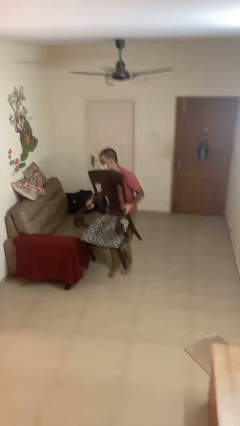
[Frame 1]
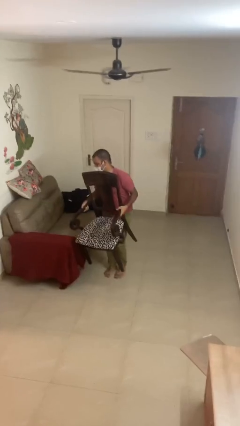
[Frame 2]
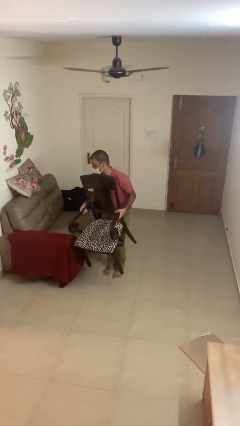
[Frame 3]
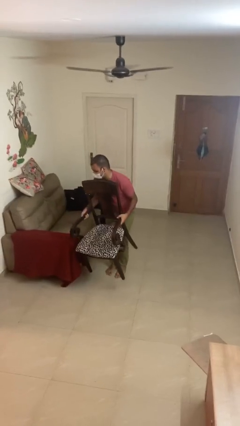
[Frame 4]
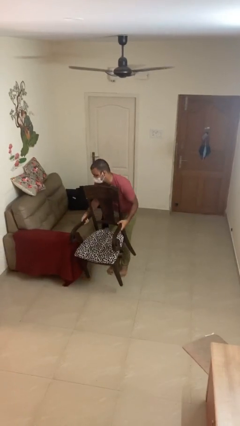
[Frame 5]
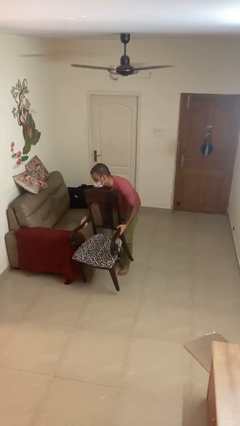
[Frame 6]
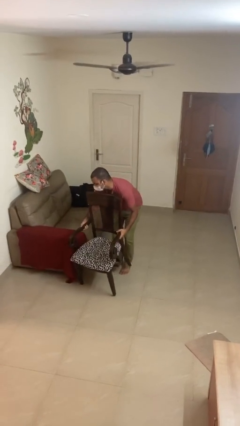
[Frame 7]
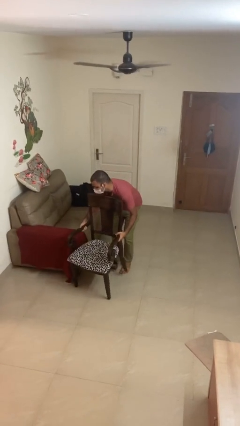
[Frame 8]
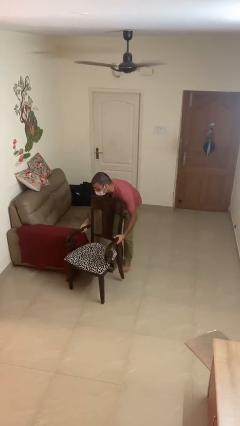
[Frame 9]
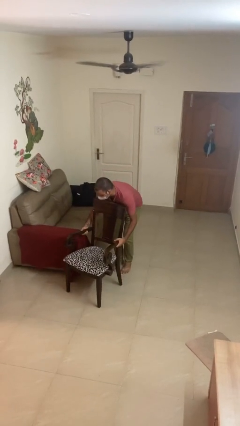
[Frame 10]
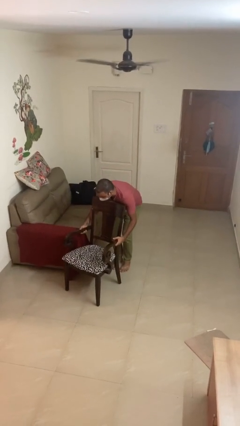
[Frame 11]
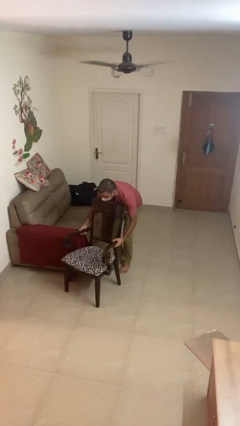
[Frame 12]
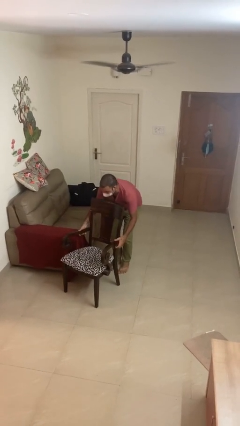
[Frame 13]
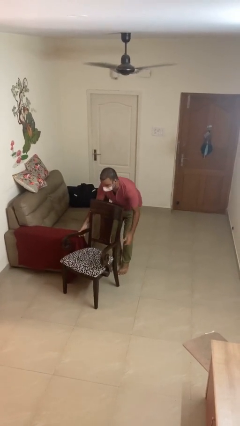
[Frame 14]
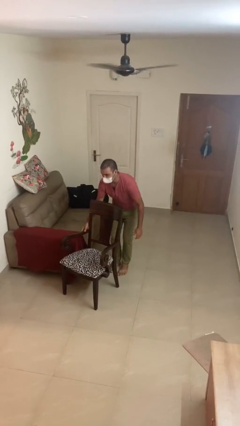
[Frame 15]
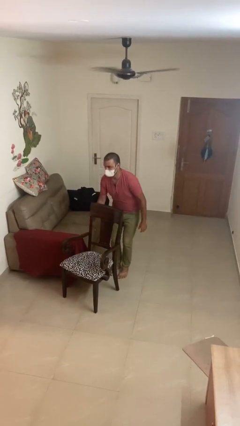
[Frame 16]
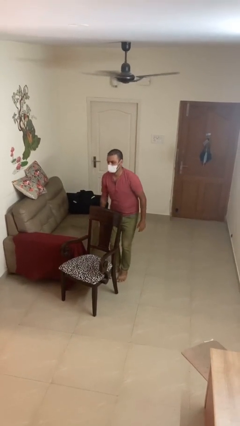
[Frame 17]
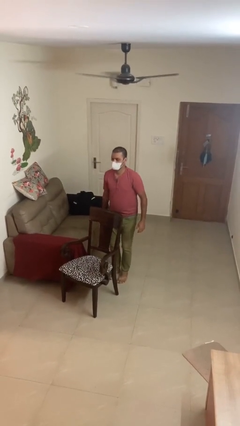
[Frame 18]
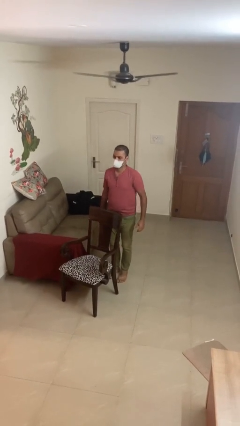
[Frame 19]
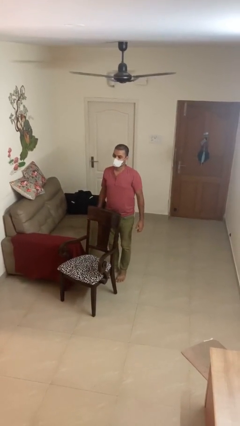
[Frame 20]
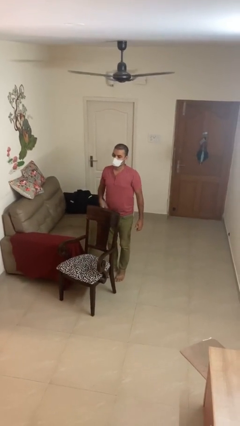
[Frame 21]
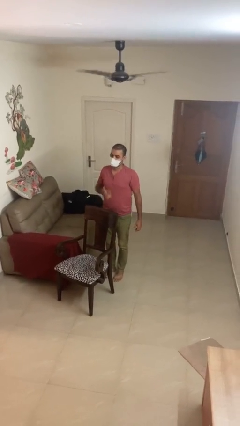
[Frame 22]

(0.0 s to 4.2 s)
person puts down object on floor

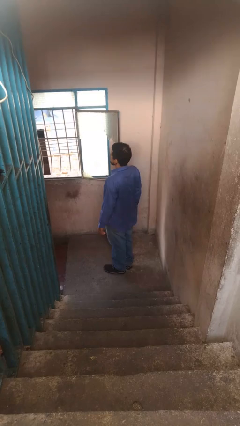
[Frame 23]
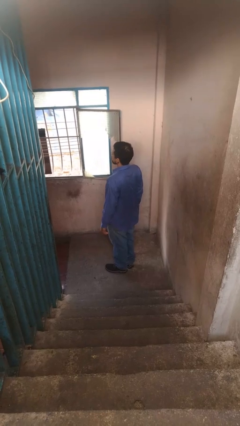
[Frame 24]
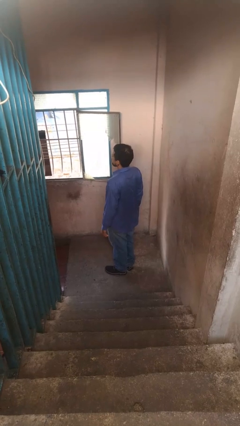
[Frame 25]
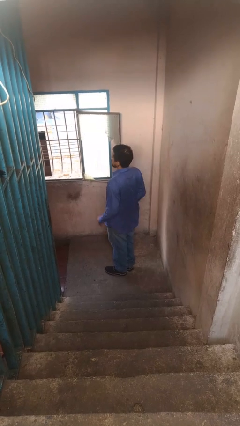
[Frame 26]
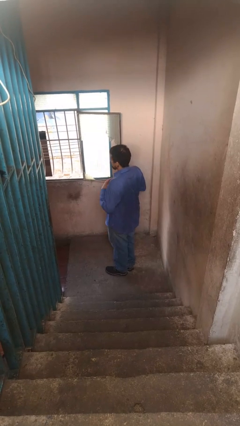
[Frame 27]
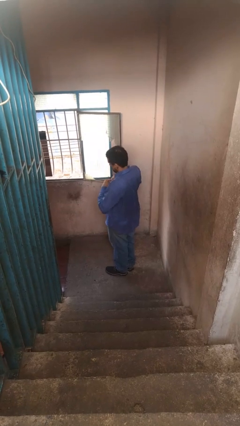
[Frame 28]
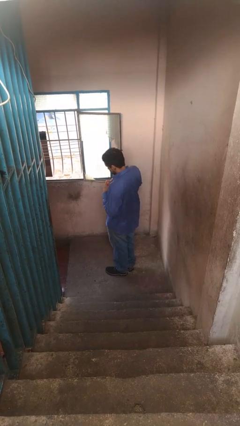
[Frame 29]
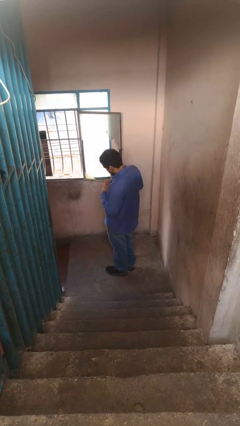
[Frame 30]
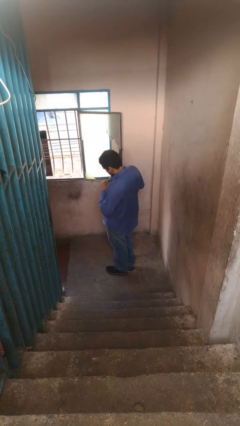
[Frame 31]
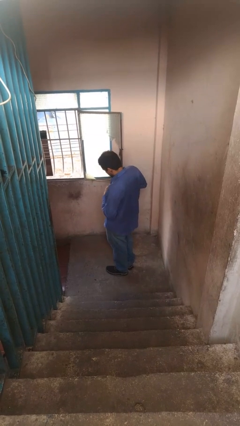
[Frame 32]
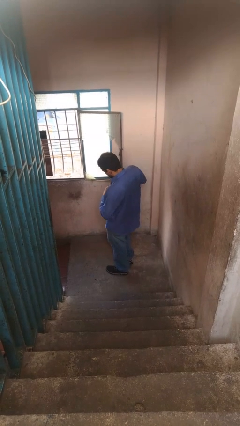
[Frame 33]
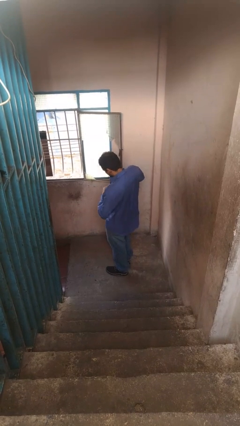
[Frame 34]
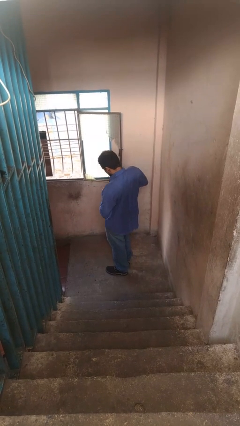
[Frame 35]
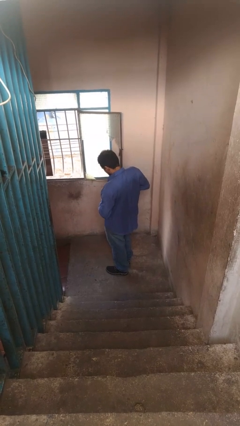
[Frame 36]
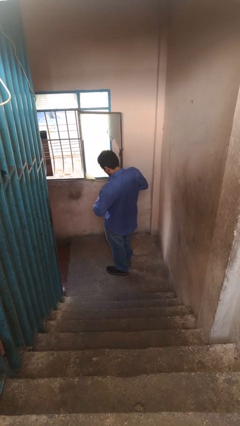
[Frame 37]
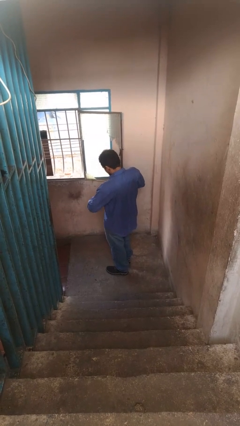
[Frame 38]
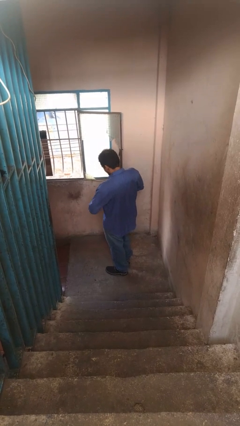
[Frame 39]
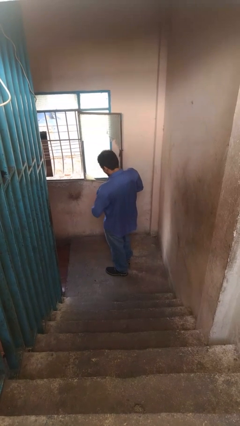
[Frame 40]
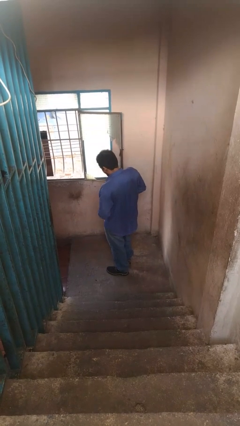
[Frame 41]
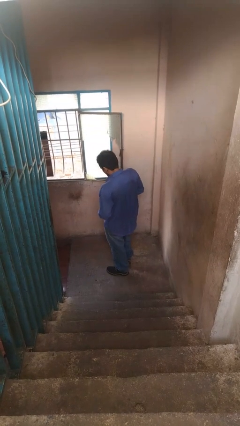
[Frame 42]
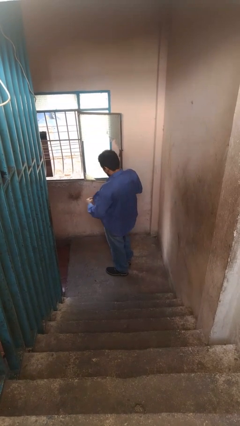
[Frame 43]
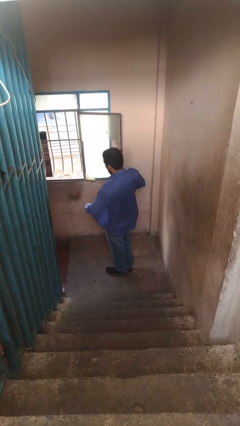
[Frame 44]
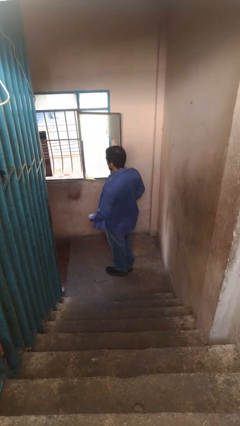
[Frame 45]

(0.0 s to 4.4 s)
person unbuttons shirt

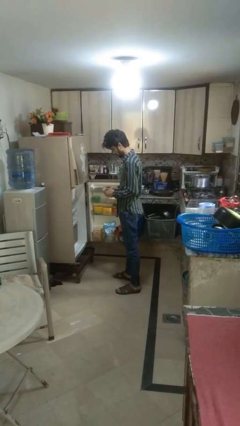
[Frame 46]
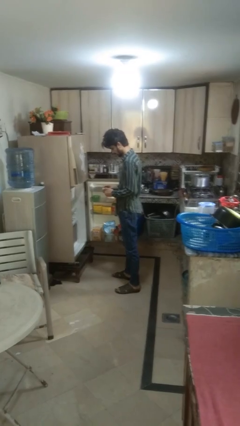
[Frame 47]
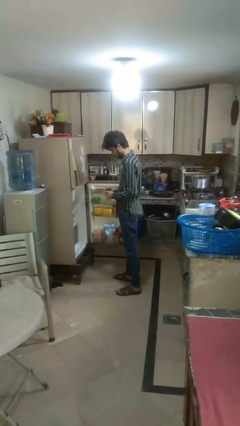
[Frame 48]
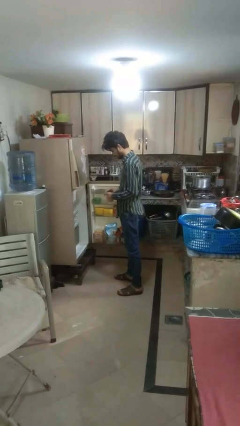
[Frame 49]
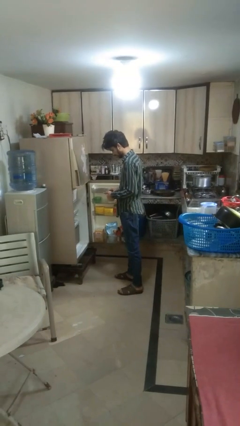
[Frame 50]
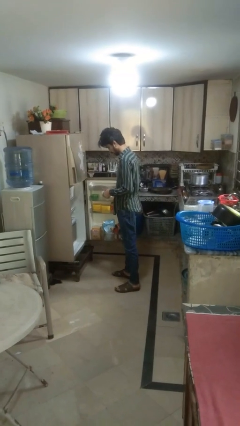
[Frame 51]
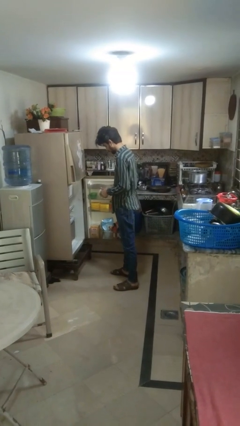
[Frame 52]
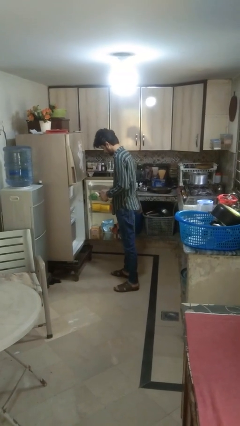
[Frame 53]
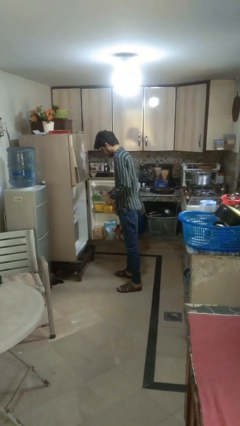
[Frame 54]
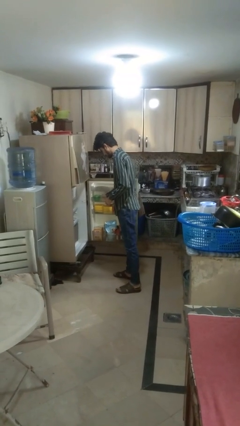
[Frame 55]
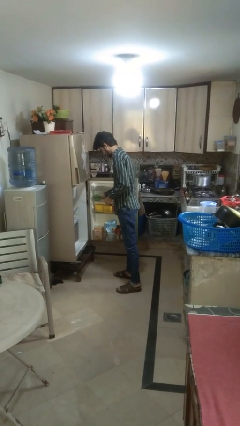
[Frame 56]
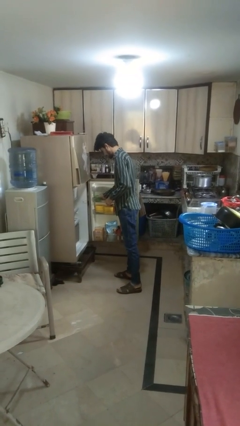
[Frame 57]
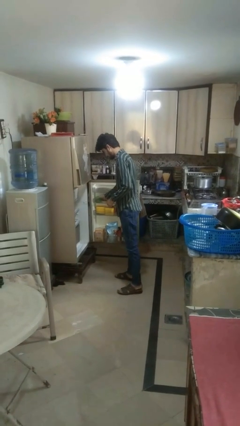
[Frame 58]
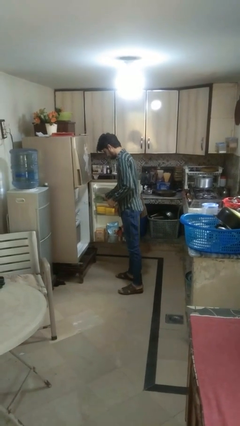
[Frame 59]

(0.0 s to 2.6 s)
person puts object into refrigerator

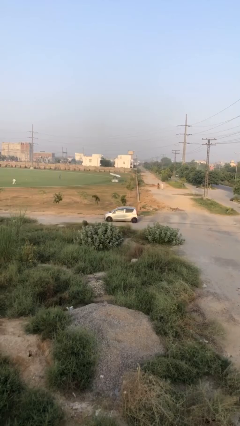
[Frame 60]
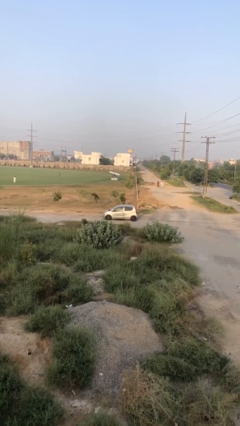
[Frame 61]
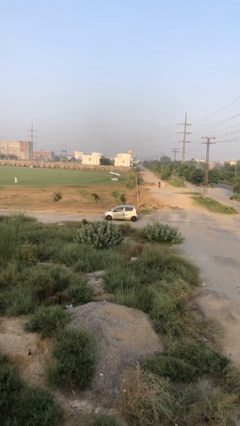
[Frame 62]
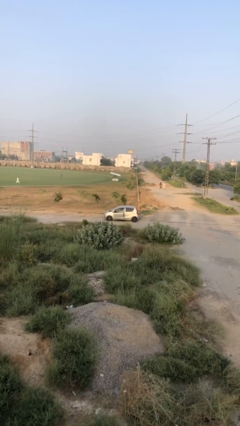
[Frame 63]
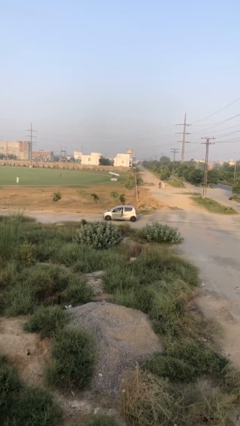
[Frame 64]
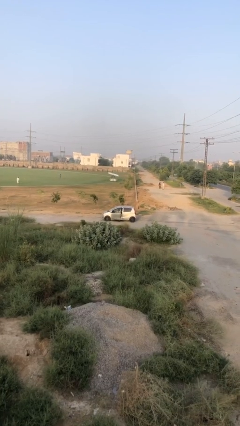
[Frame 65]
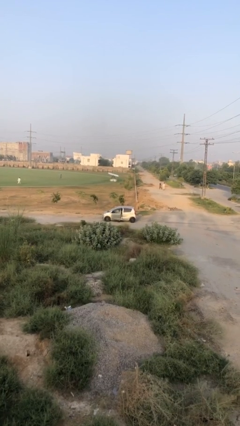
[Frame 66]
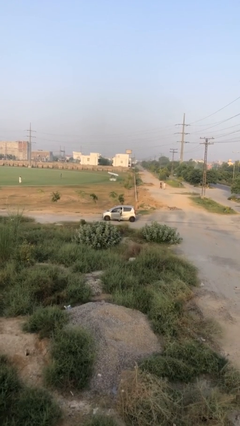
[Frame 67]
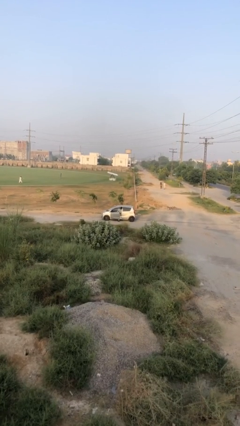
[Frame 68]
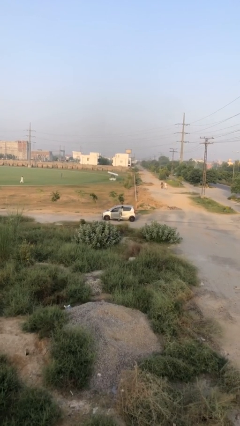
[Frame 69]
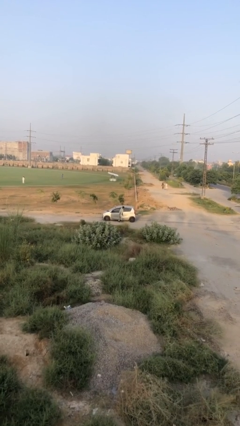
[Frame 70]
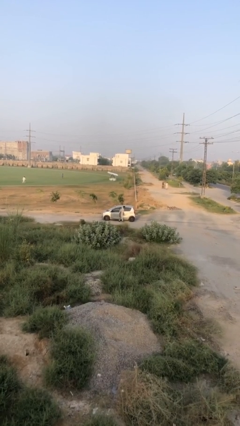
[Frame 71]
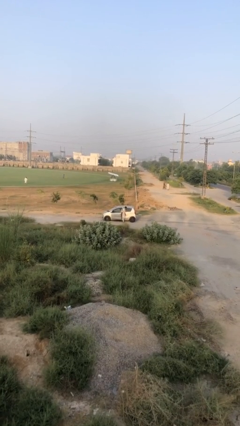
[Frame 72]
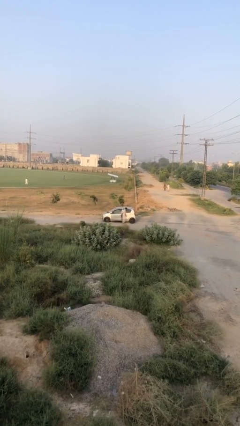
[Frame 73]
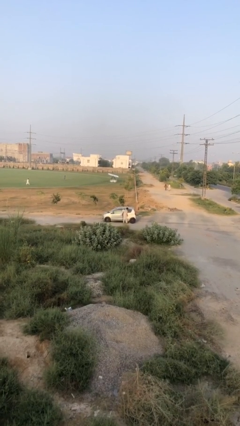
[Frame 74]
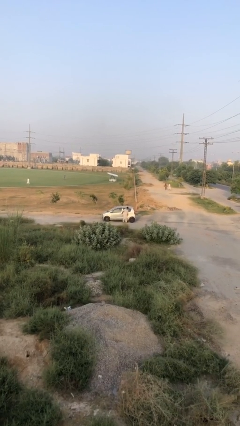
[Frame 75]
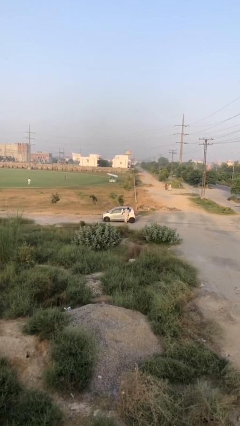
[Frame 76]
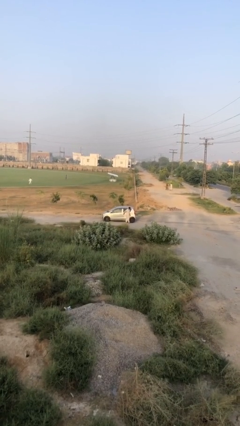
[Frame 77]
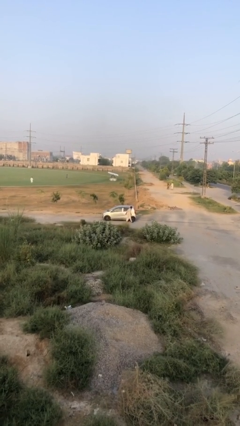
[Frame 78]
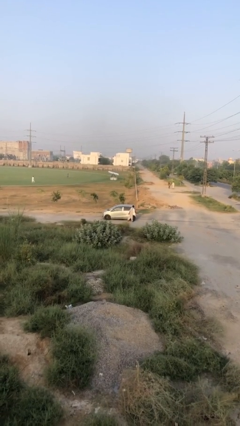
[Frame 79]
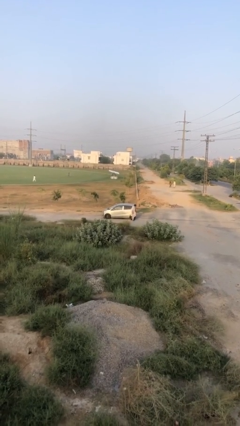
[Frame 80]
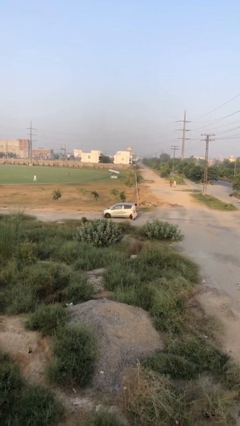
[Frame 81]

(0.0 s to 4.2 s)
car drops off person

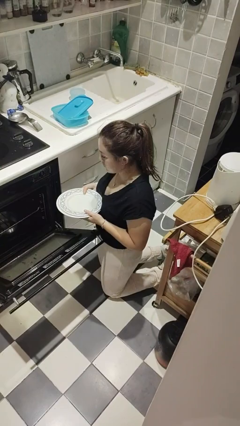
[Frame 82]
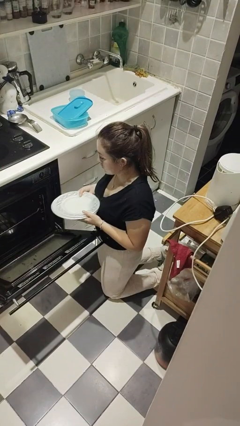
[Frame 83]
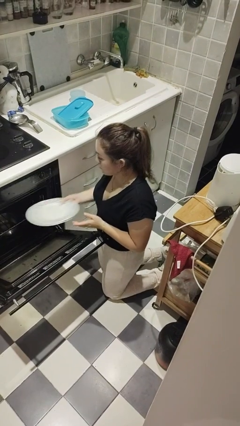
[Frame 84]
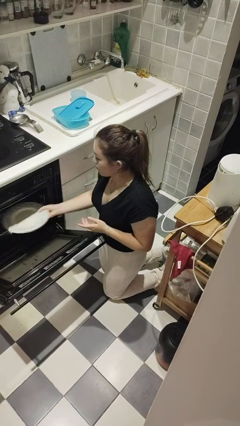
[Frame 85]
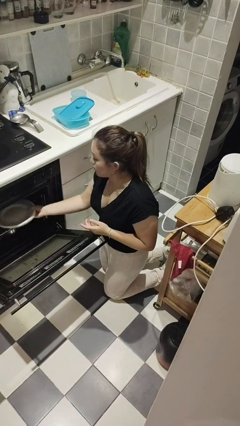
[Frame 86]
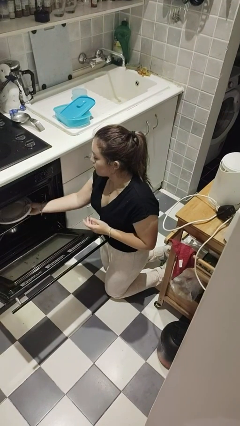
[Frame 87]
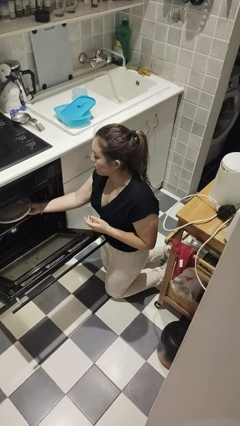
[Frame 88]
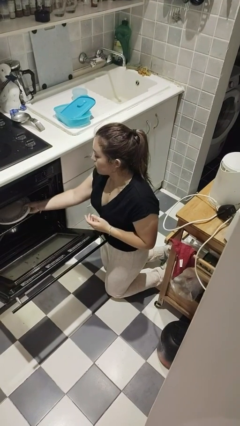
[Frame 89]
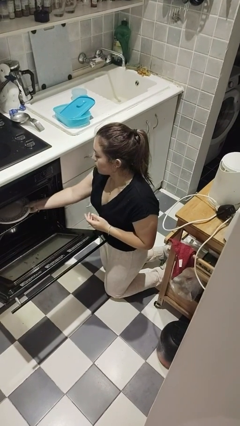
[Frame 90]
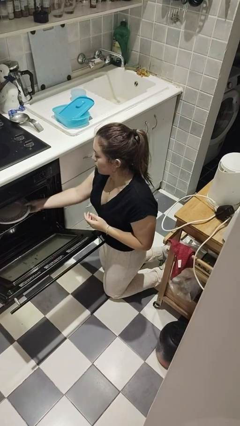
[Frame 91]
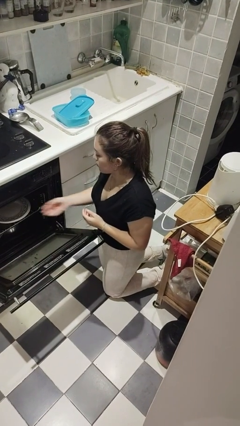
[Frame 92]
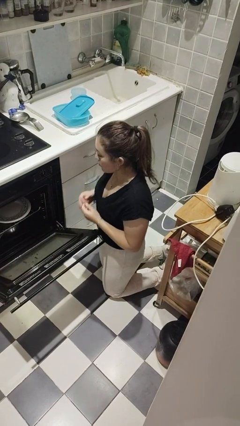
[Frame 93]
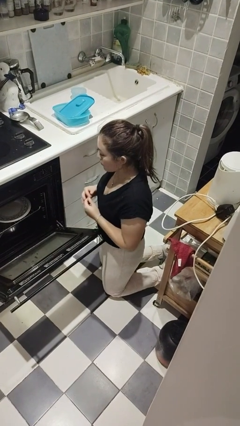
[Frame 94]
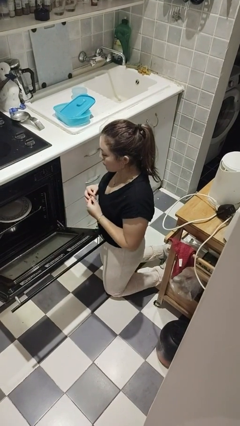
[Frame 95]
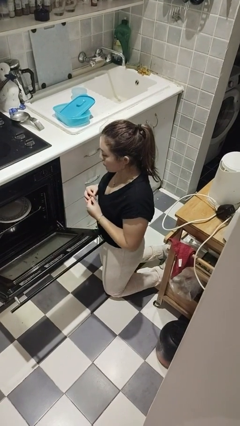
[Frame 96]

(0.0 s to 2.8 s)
person loads dishwasher
